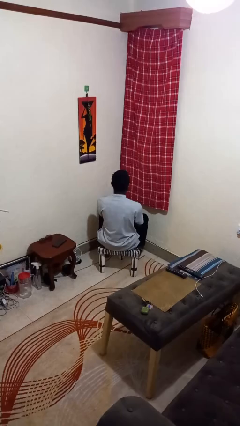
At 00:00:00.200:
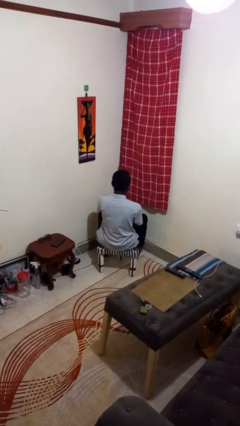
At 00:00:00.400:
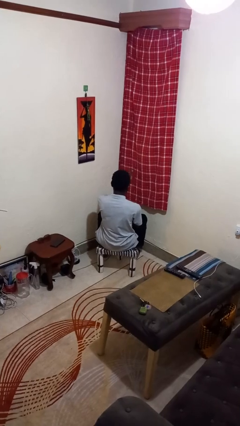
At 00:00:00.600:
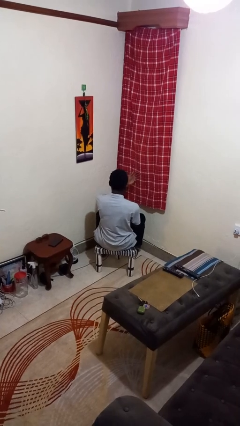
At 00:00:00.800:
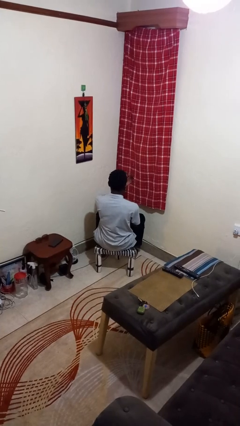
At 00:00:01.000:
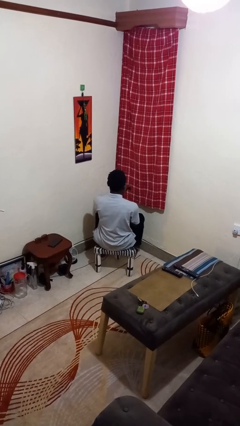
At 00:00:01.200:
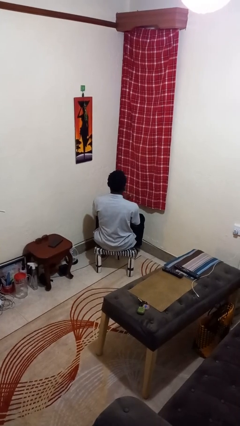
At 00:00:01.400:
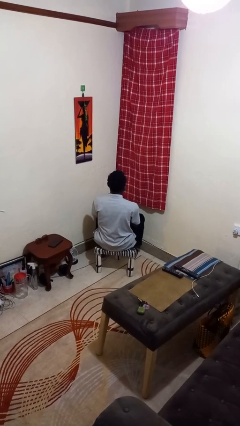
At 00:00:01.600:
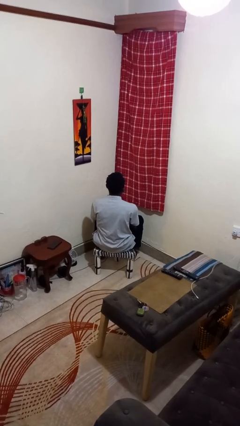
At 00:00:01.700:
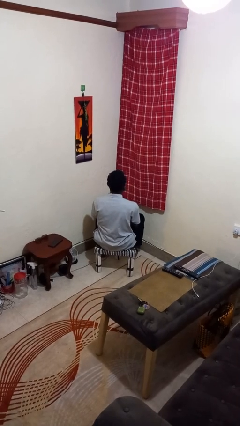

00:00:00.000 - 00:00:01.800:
person gestures swipe right

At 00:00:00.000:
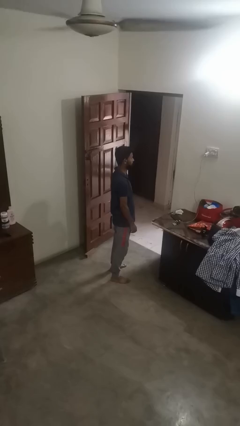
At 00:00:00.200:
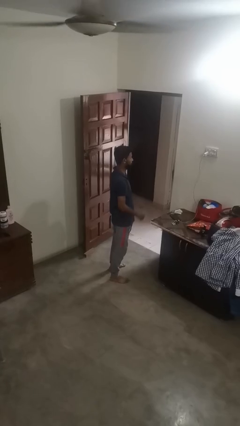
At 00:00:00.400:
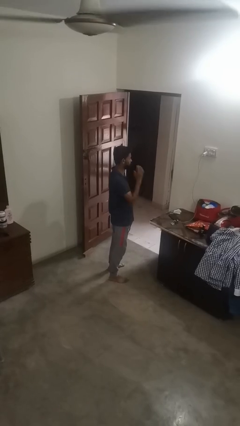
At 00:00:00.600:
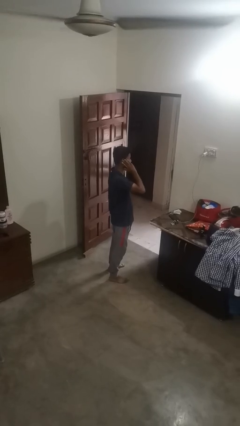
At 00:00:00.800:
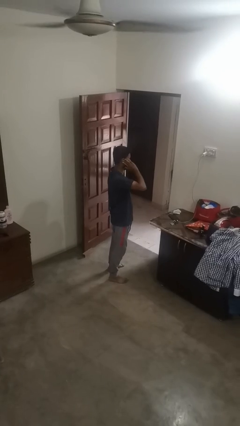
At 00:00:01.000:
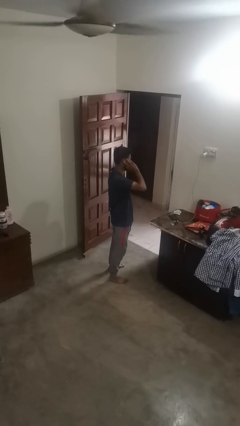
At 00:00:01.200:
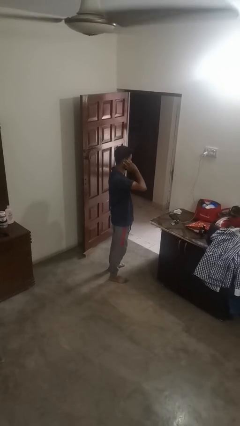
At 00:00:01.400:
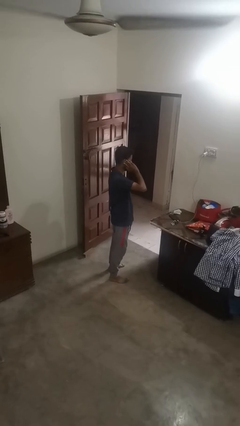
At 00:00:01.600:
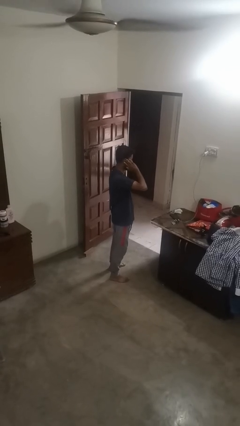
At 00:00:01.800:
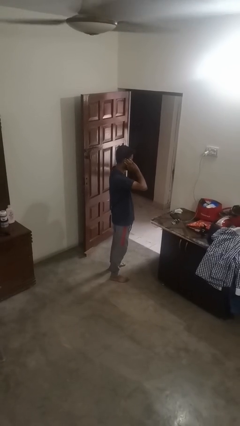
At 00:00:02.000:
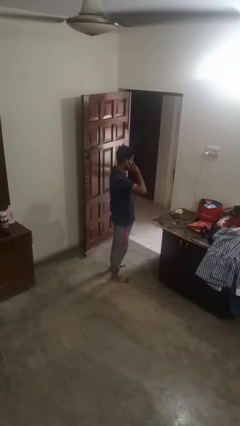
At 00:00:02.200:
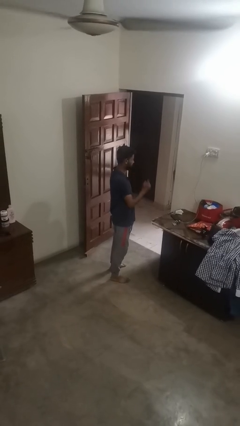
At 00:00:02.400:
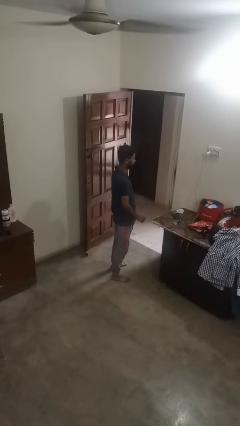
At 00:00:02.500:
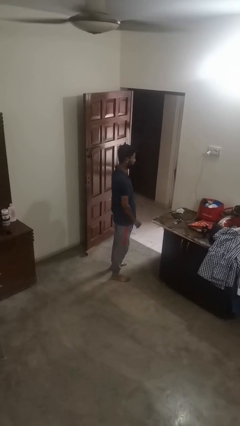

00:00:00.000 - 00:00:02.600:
person touches earlobe

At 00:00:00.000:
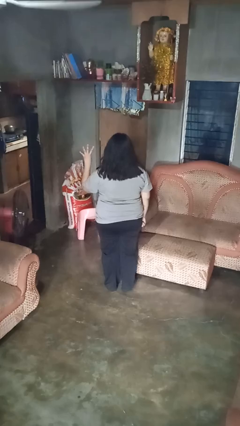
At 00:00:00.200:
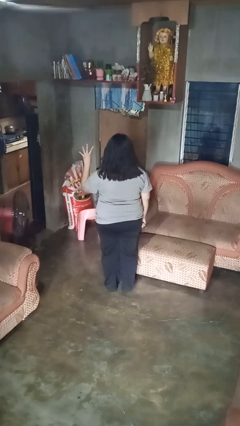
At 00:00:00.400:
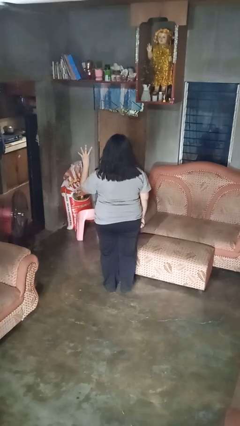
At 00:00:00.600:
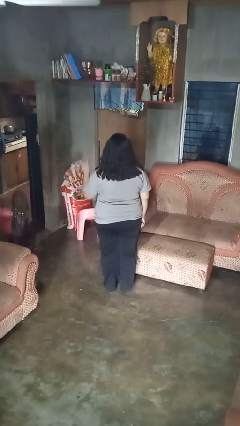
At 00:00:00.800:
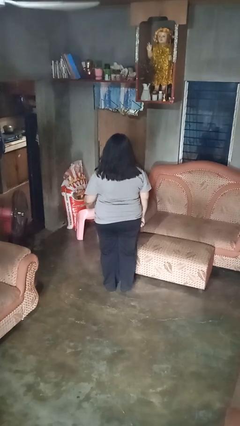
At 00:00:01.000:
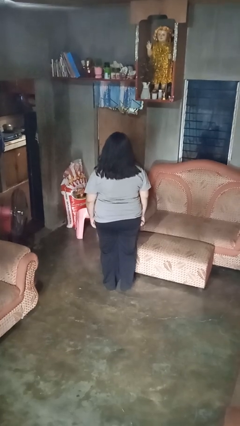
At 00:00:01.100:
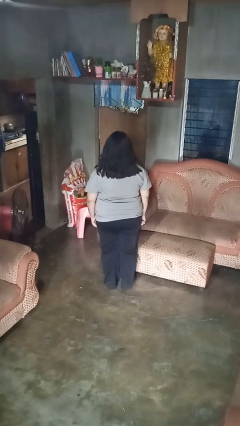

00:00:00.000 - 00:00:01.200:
person gestures number four

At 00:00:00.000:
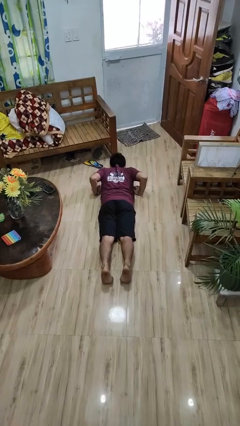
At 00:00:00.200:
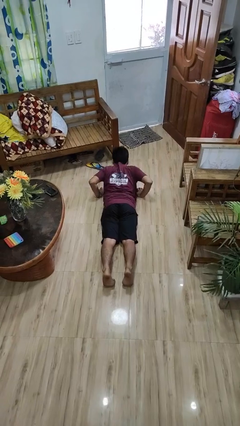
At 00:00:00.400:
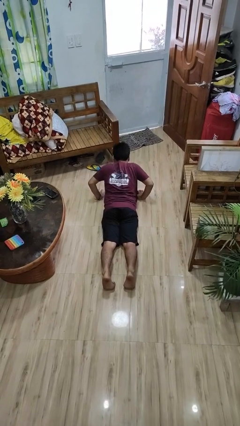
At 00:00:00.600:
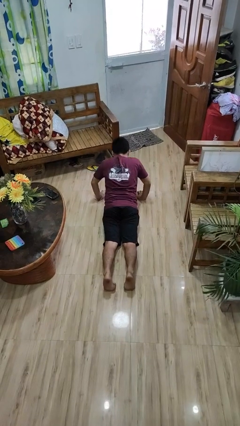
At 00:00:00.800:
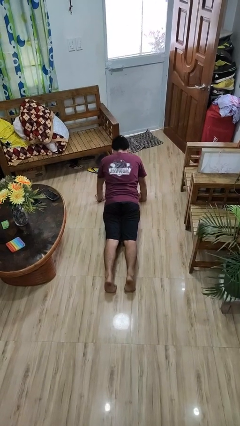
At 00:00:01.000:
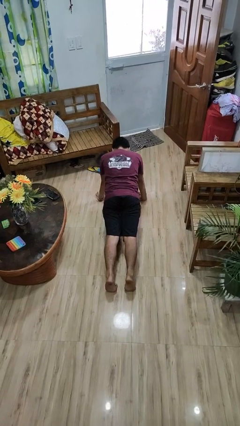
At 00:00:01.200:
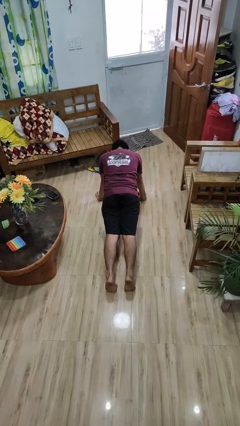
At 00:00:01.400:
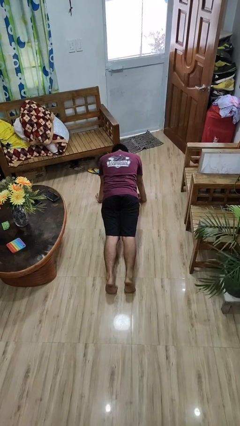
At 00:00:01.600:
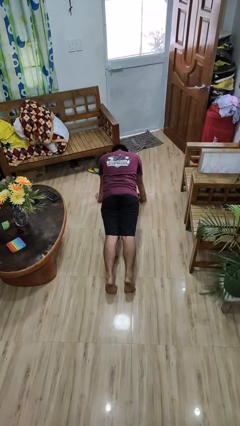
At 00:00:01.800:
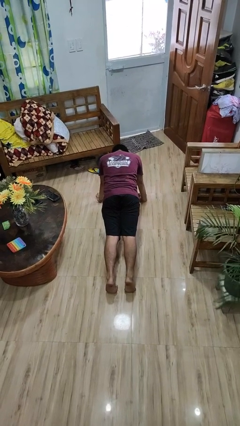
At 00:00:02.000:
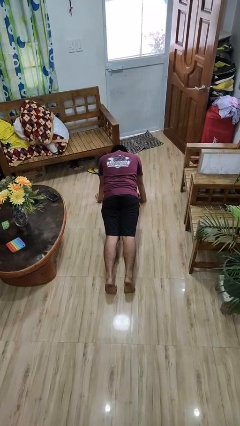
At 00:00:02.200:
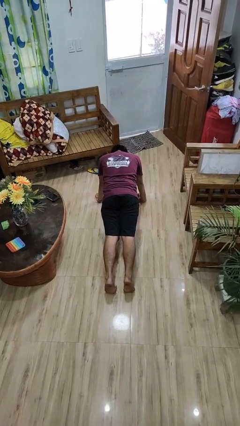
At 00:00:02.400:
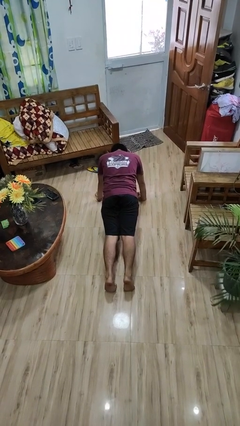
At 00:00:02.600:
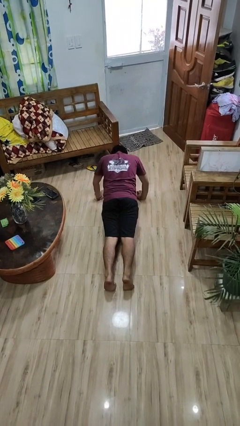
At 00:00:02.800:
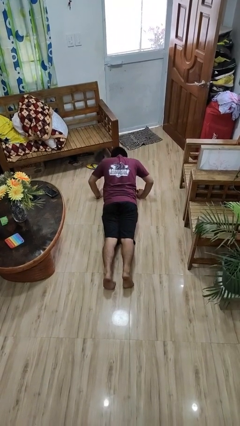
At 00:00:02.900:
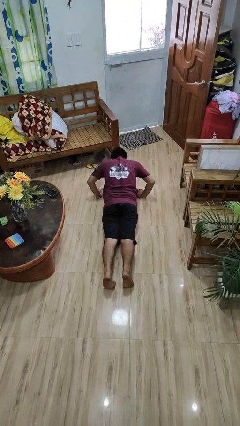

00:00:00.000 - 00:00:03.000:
person exercises with pushup

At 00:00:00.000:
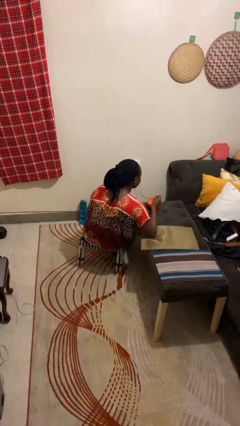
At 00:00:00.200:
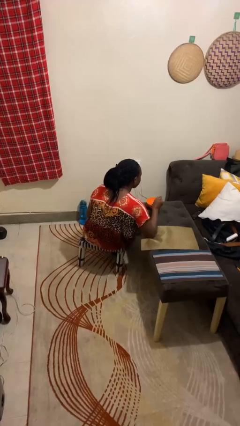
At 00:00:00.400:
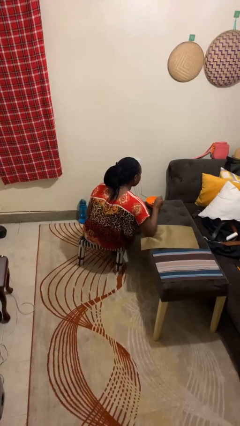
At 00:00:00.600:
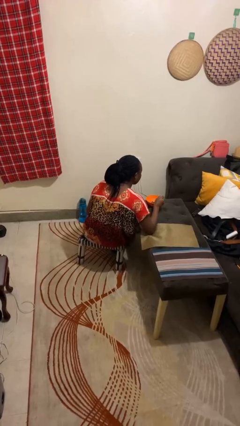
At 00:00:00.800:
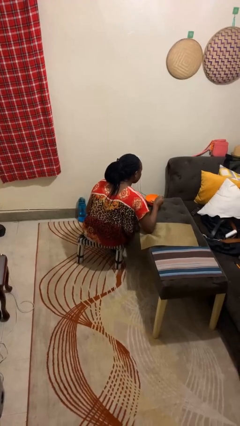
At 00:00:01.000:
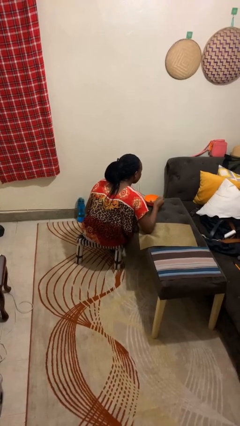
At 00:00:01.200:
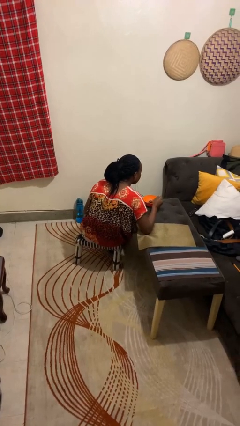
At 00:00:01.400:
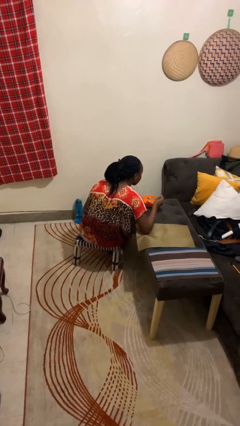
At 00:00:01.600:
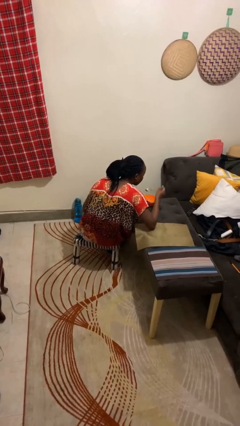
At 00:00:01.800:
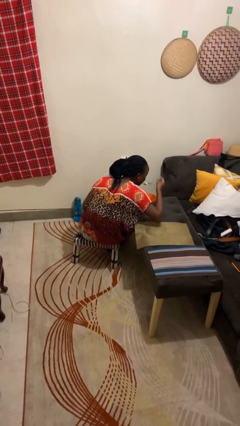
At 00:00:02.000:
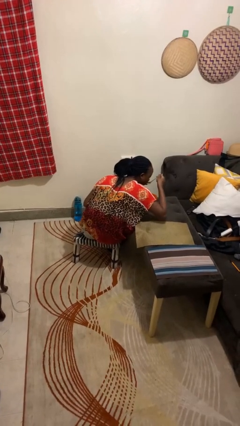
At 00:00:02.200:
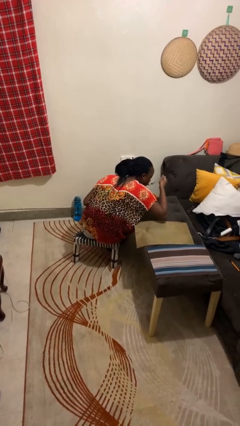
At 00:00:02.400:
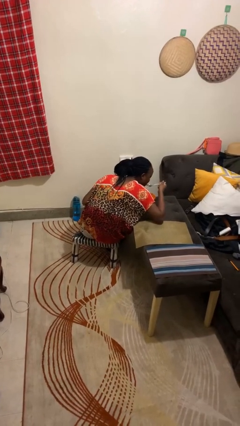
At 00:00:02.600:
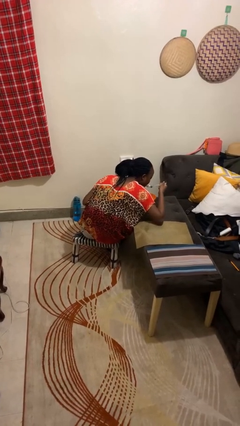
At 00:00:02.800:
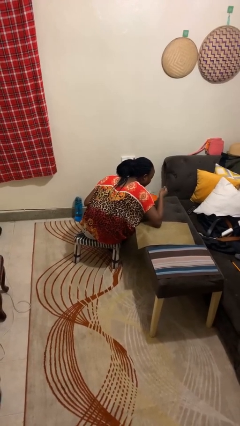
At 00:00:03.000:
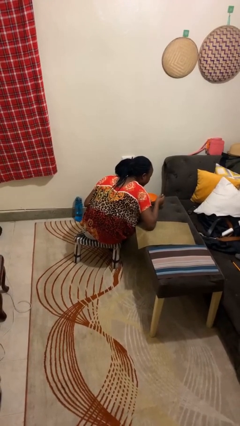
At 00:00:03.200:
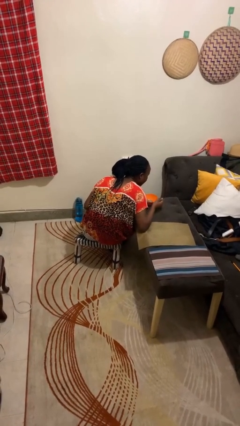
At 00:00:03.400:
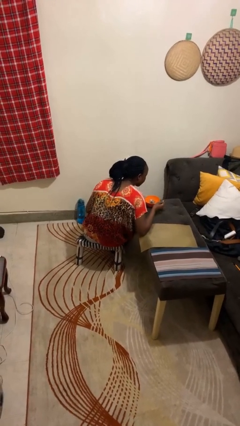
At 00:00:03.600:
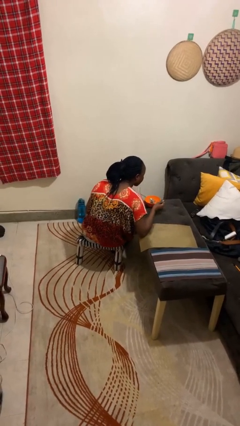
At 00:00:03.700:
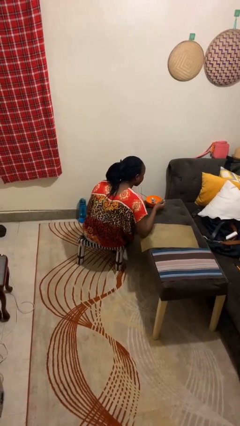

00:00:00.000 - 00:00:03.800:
person eats with utensil

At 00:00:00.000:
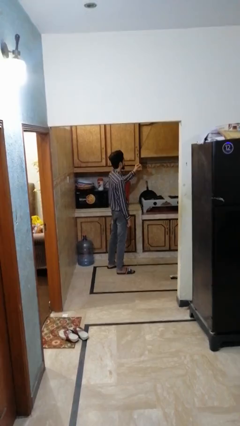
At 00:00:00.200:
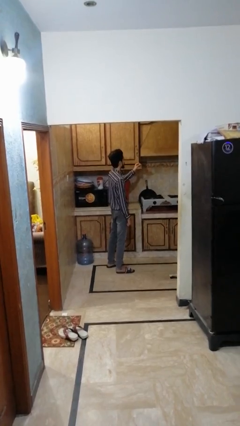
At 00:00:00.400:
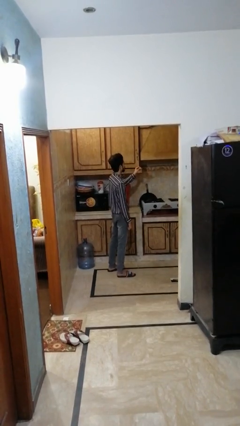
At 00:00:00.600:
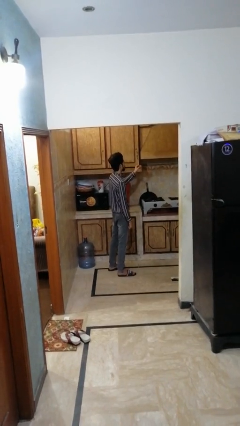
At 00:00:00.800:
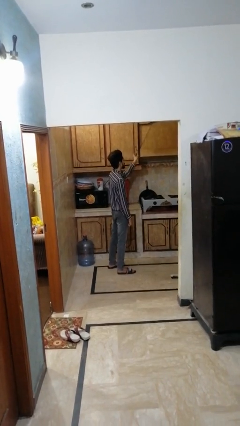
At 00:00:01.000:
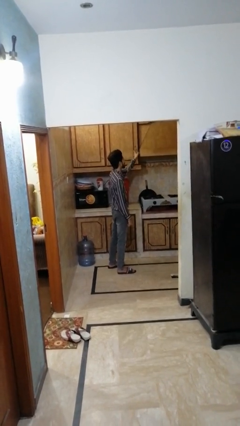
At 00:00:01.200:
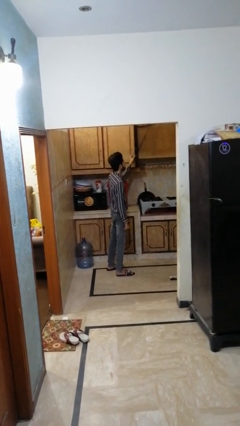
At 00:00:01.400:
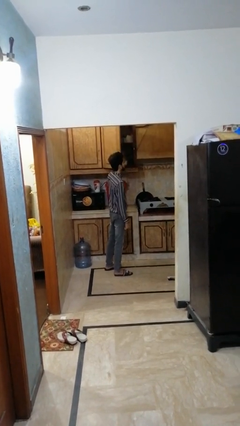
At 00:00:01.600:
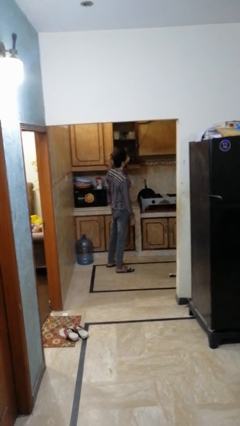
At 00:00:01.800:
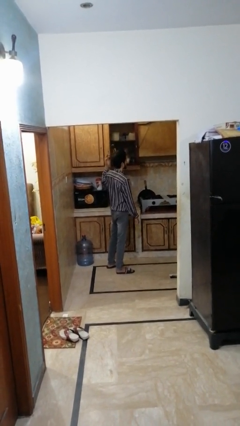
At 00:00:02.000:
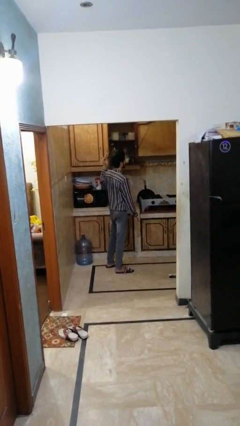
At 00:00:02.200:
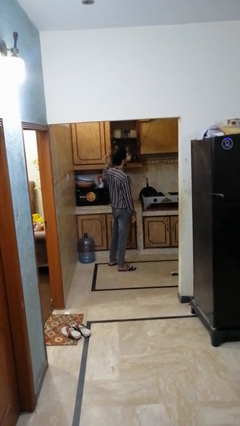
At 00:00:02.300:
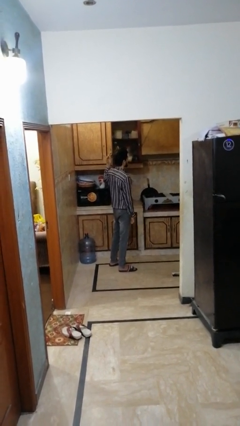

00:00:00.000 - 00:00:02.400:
person opens cabinet

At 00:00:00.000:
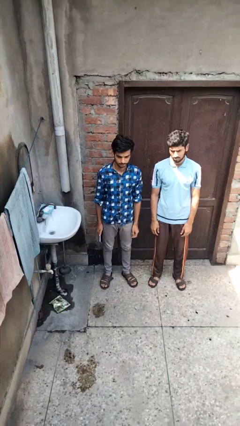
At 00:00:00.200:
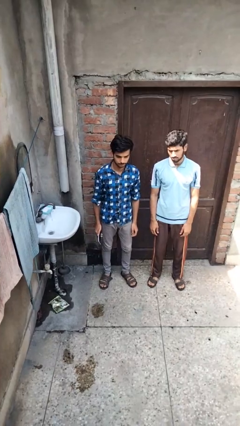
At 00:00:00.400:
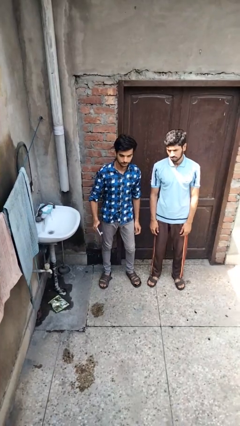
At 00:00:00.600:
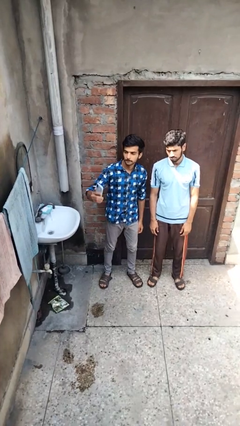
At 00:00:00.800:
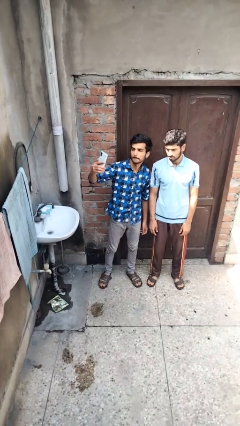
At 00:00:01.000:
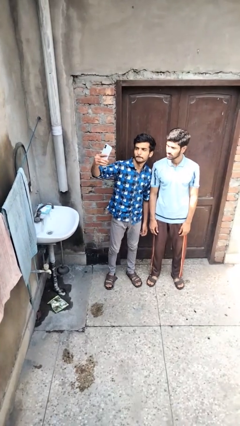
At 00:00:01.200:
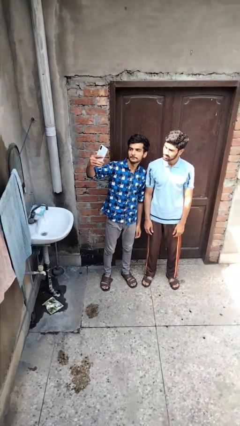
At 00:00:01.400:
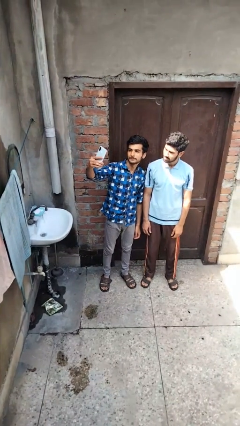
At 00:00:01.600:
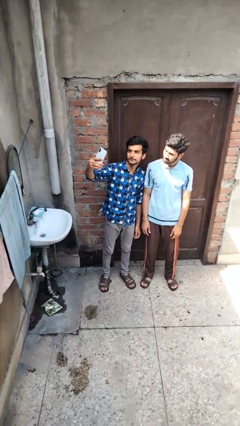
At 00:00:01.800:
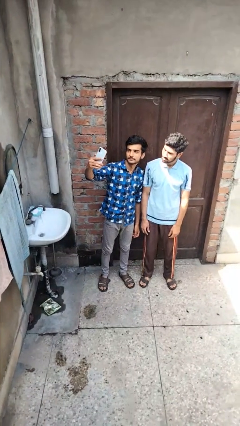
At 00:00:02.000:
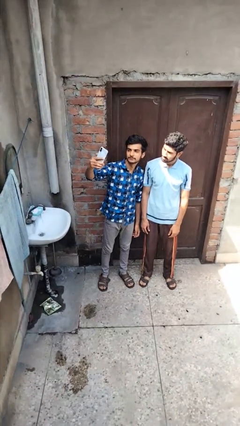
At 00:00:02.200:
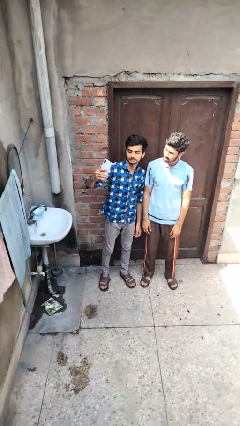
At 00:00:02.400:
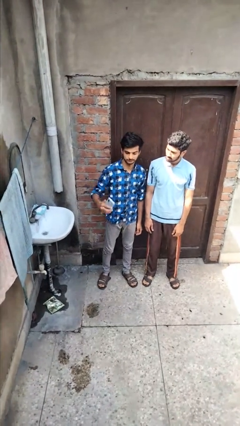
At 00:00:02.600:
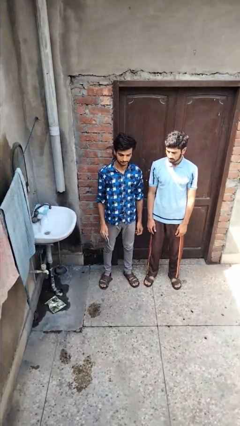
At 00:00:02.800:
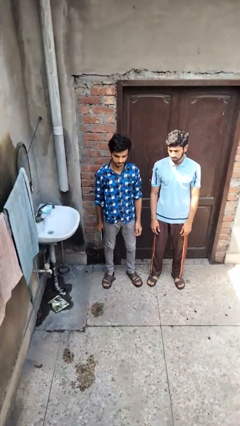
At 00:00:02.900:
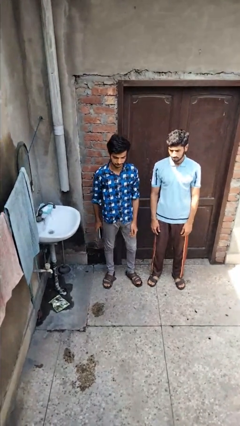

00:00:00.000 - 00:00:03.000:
person takes selfie with person
